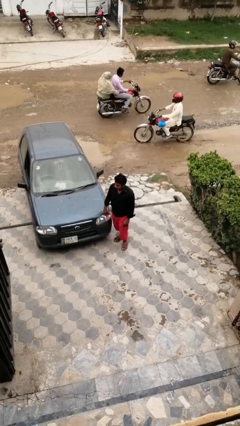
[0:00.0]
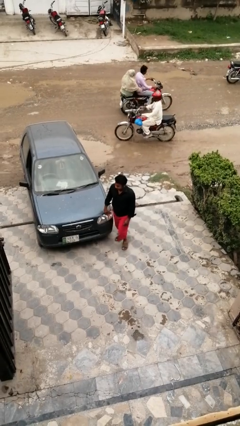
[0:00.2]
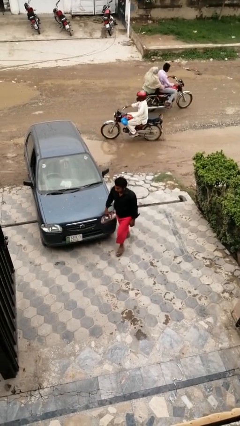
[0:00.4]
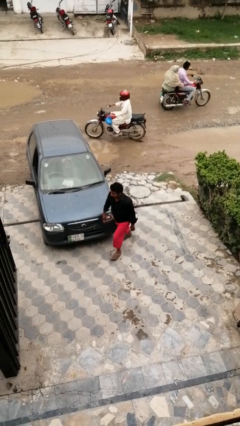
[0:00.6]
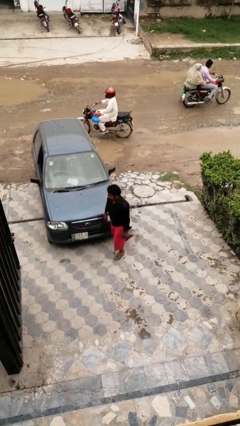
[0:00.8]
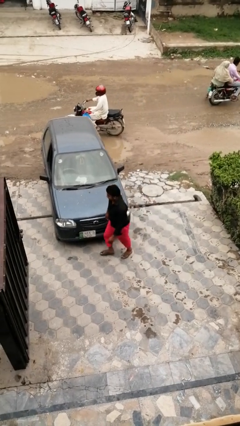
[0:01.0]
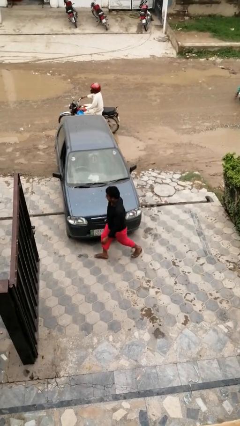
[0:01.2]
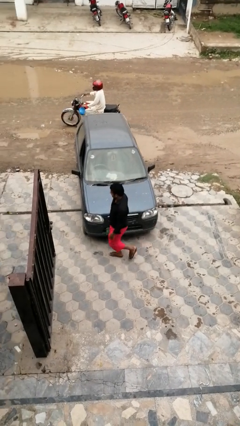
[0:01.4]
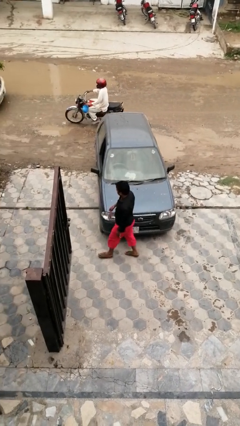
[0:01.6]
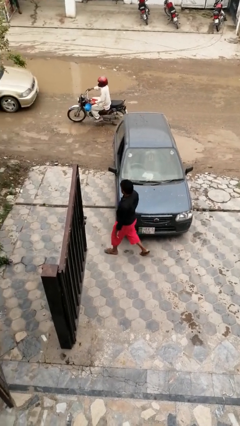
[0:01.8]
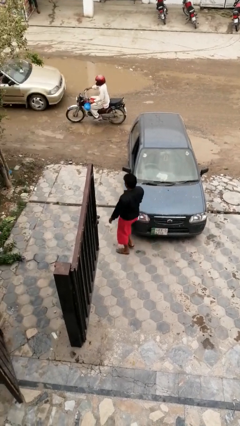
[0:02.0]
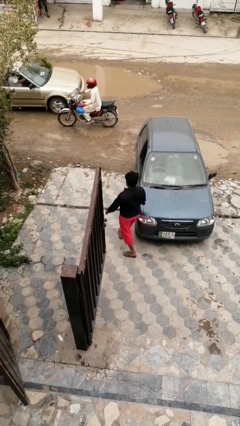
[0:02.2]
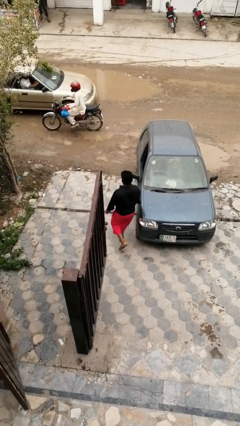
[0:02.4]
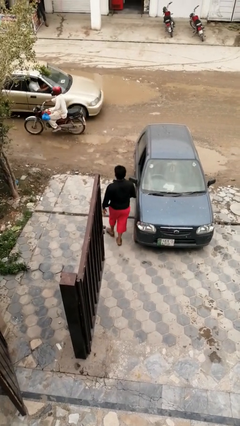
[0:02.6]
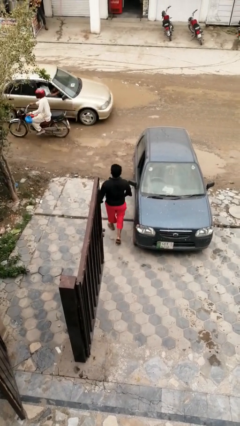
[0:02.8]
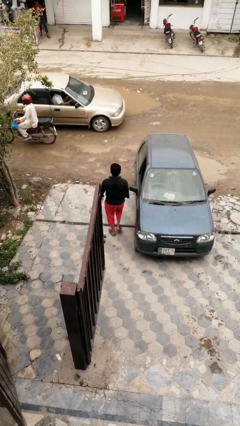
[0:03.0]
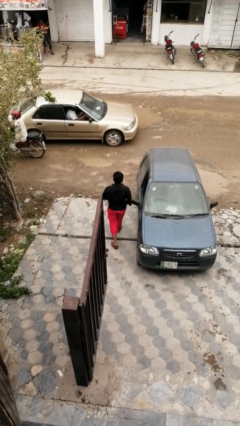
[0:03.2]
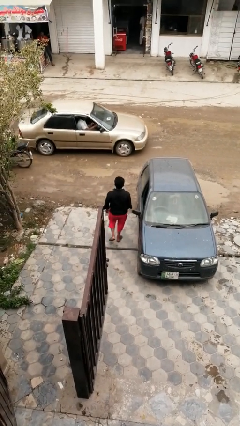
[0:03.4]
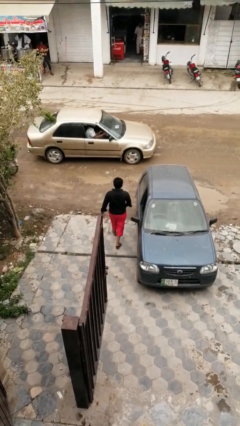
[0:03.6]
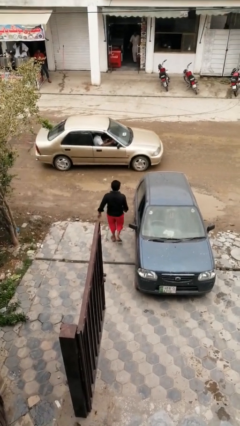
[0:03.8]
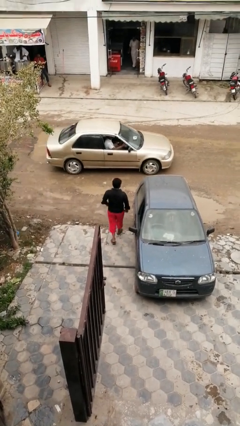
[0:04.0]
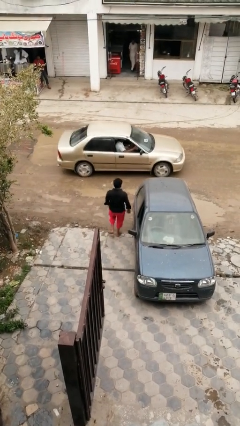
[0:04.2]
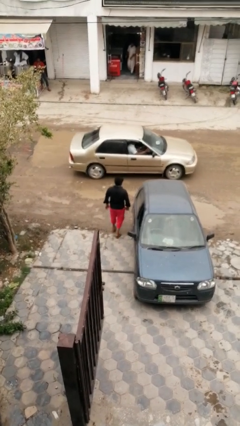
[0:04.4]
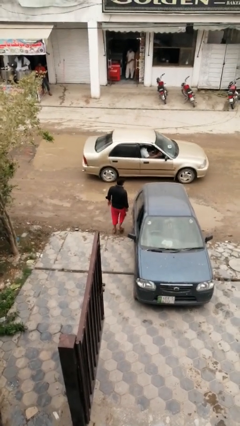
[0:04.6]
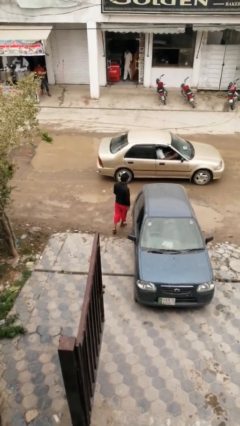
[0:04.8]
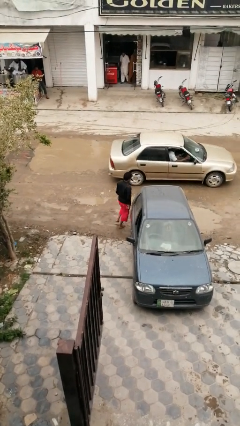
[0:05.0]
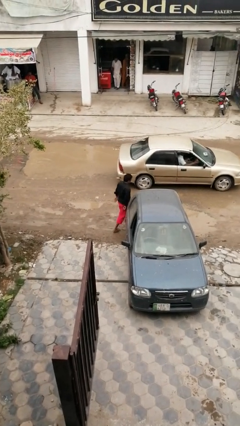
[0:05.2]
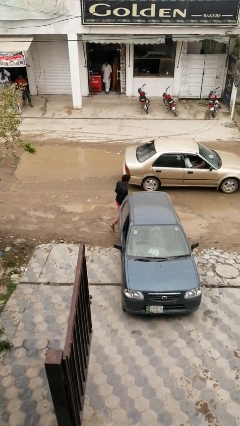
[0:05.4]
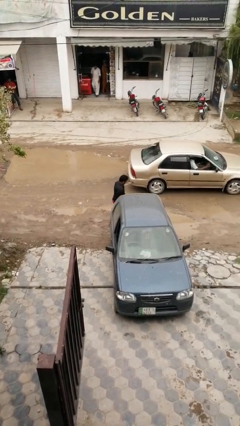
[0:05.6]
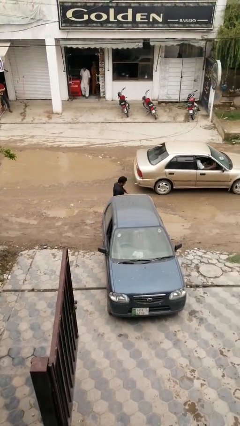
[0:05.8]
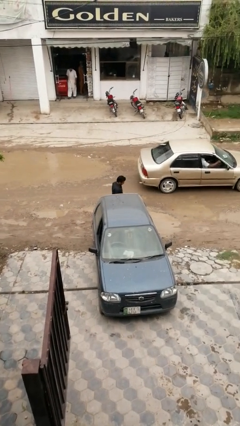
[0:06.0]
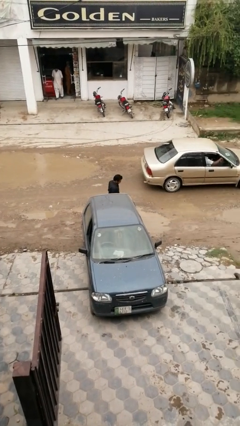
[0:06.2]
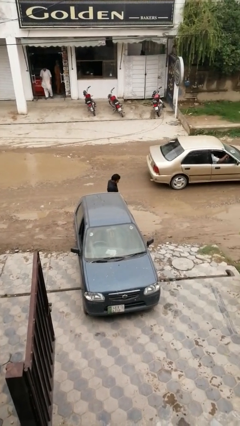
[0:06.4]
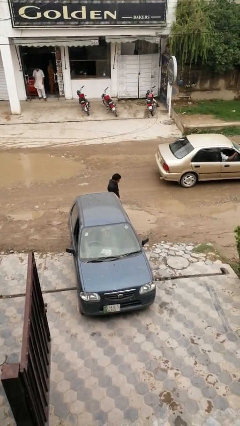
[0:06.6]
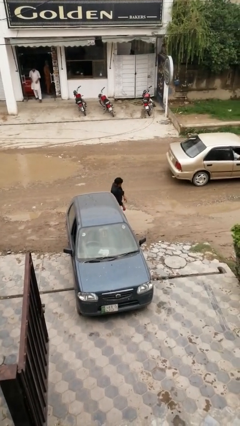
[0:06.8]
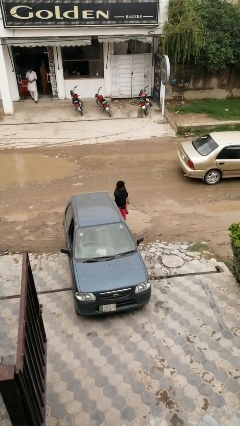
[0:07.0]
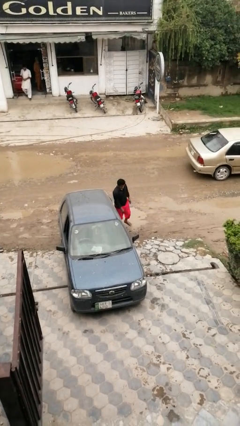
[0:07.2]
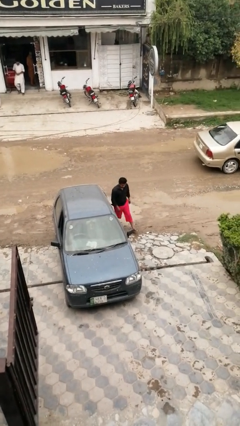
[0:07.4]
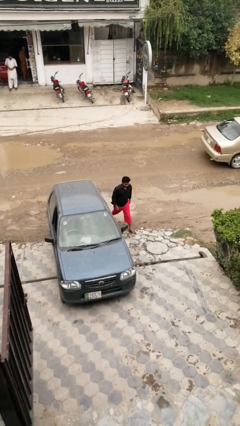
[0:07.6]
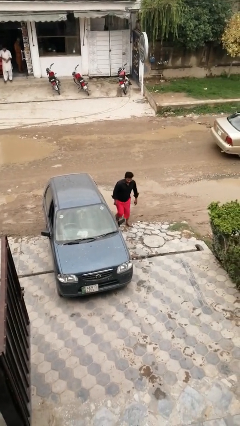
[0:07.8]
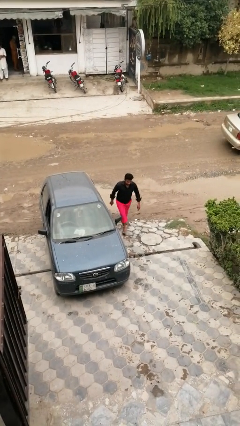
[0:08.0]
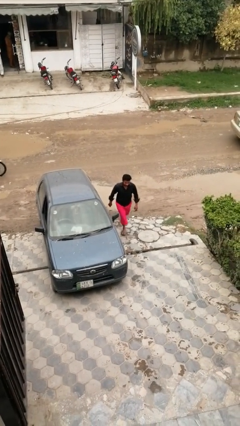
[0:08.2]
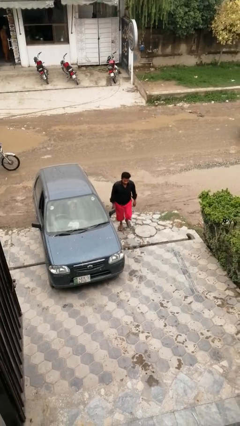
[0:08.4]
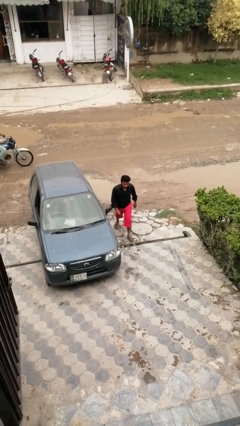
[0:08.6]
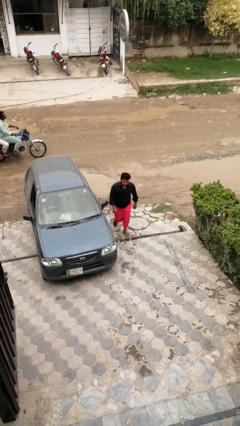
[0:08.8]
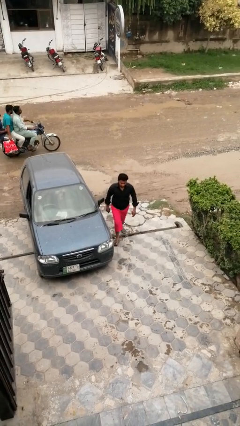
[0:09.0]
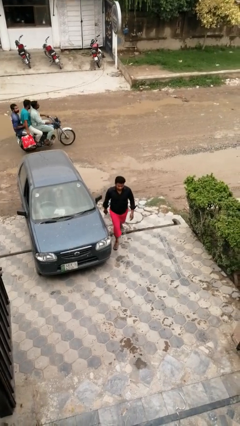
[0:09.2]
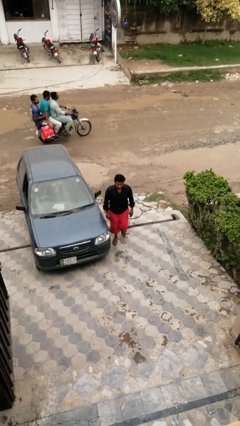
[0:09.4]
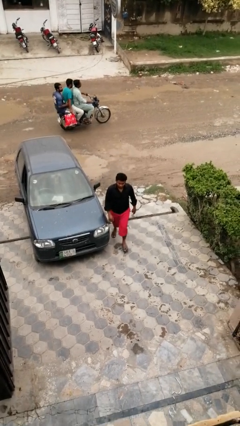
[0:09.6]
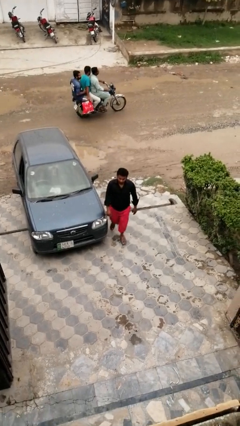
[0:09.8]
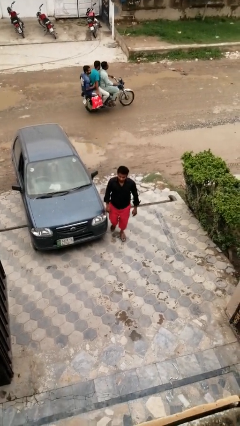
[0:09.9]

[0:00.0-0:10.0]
person walks around car

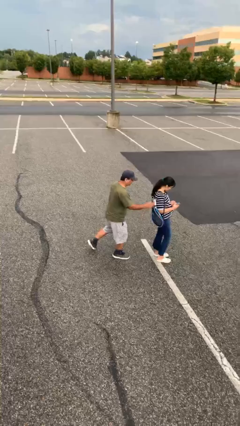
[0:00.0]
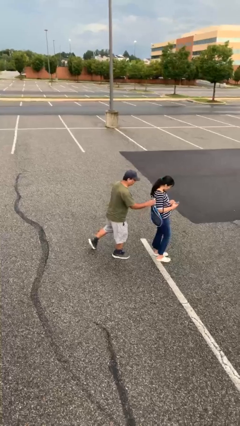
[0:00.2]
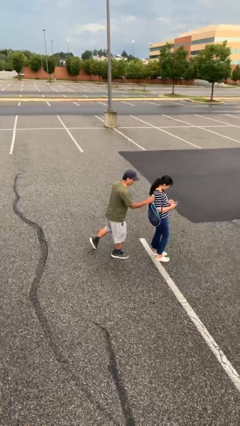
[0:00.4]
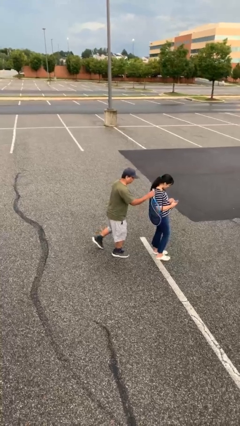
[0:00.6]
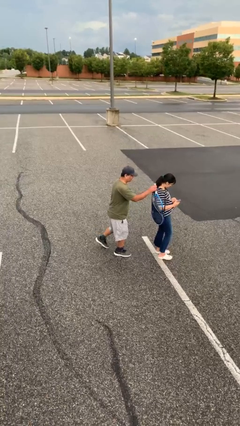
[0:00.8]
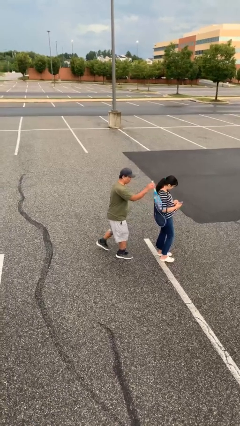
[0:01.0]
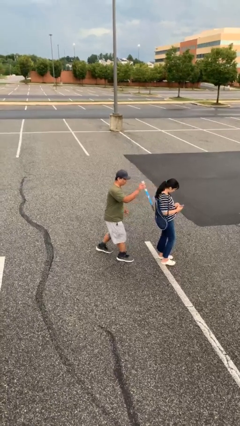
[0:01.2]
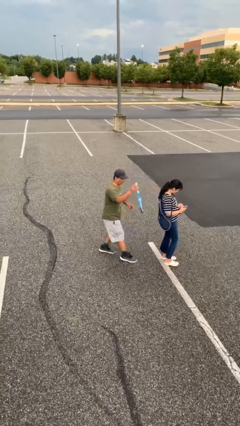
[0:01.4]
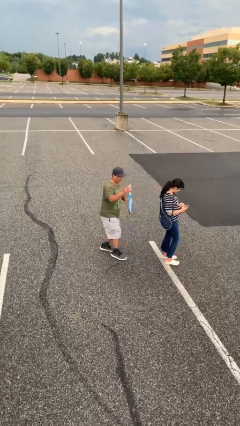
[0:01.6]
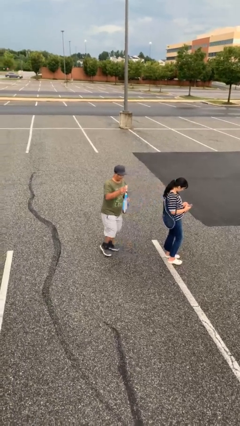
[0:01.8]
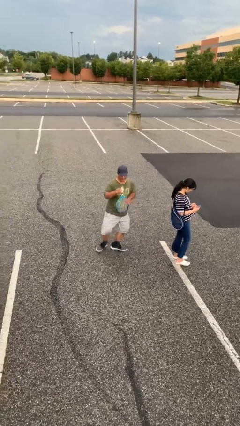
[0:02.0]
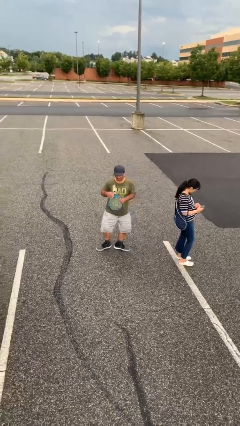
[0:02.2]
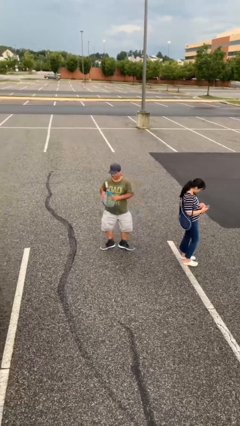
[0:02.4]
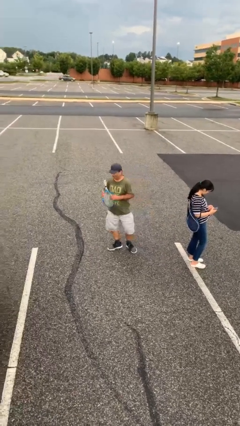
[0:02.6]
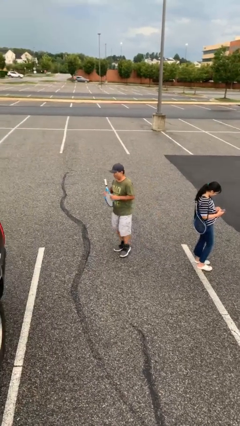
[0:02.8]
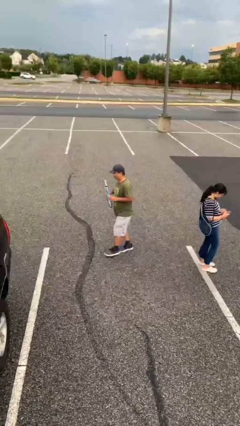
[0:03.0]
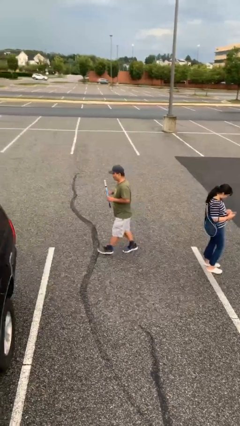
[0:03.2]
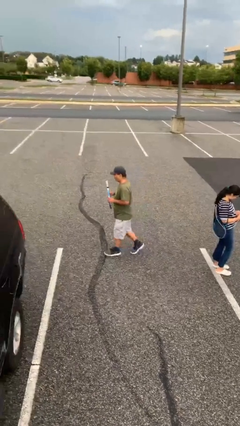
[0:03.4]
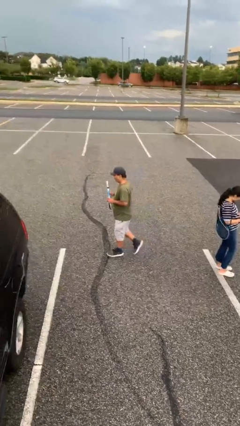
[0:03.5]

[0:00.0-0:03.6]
person steals object from person

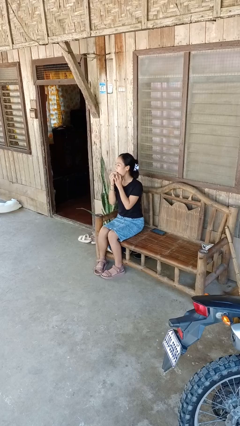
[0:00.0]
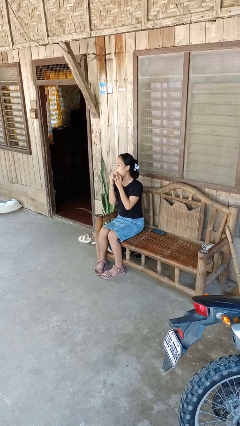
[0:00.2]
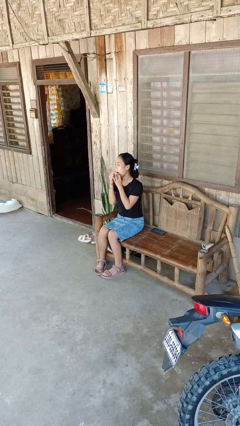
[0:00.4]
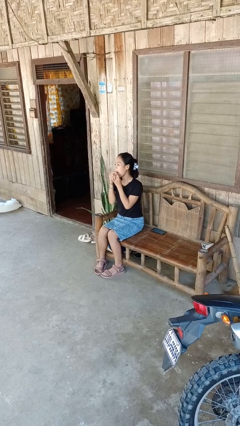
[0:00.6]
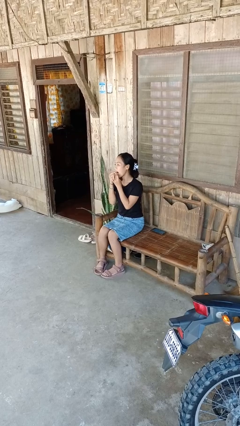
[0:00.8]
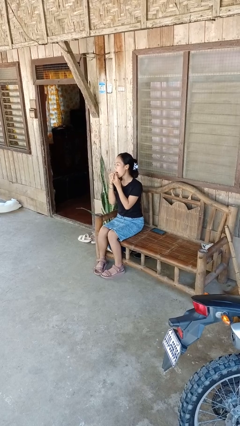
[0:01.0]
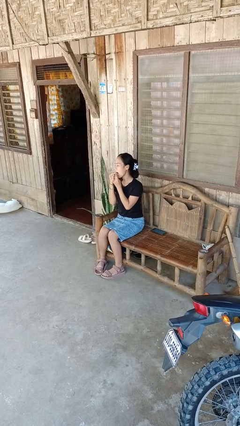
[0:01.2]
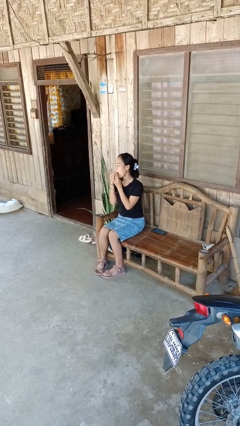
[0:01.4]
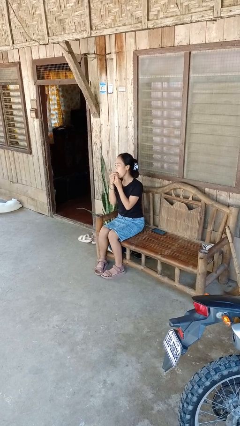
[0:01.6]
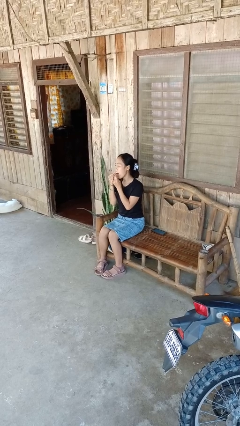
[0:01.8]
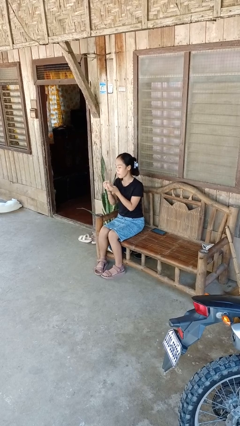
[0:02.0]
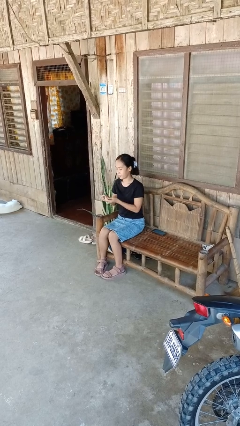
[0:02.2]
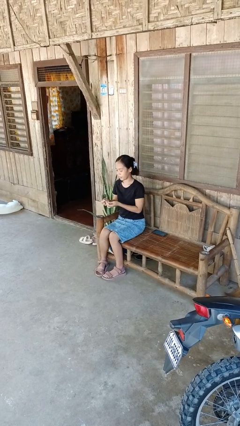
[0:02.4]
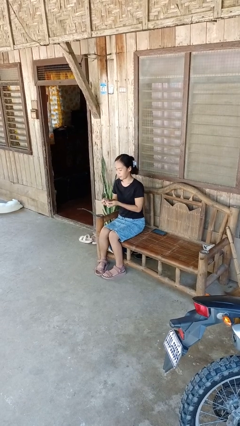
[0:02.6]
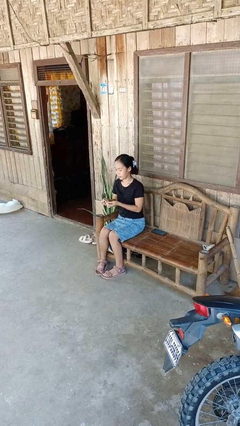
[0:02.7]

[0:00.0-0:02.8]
person flosses

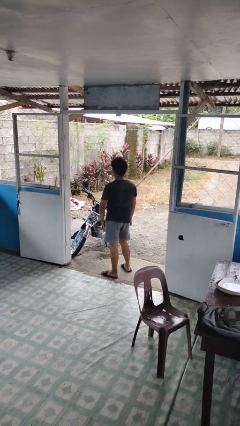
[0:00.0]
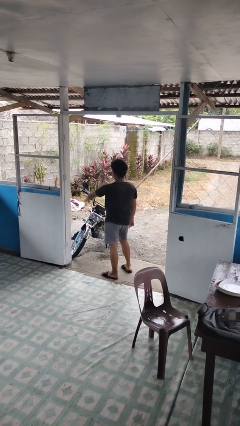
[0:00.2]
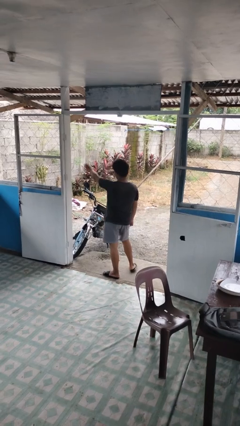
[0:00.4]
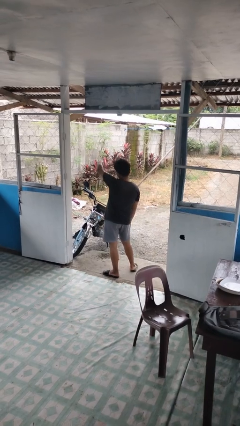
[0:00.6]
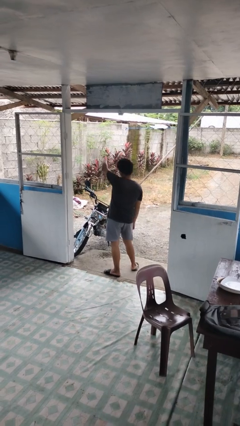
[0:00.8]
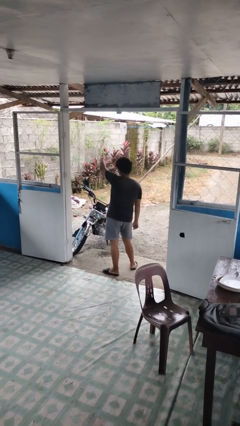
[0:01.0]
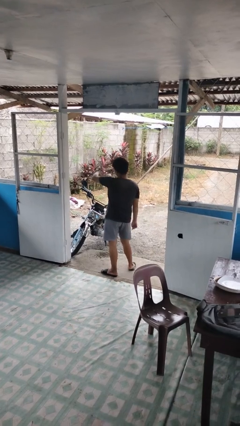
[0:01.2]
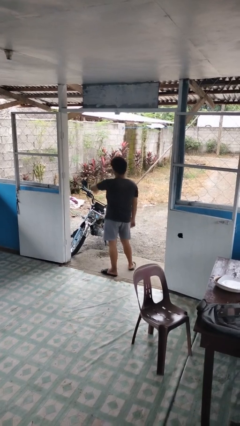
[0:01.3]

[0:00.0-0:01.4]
person gestures come here
